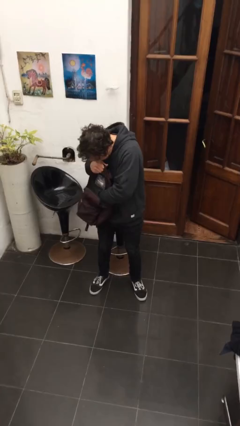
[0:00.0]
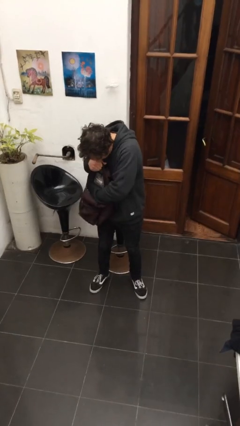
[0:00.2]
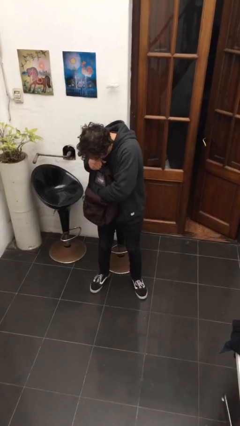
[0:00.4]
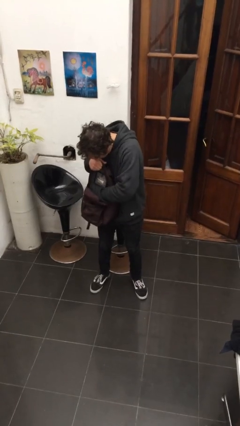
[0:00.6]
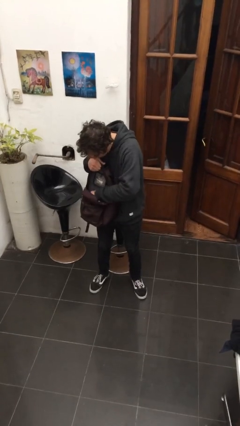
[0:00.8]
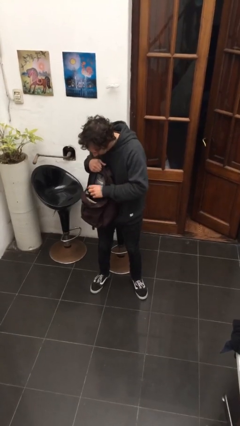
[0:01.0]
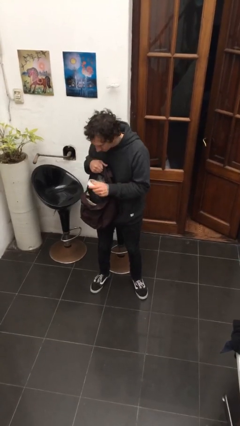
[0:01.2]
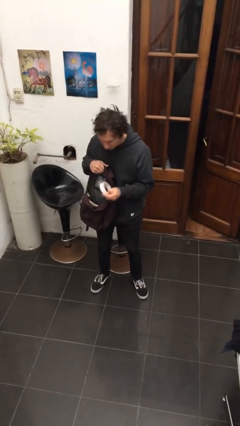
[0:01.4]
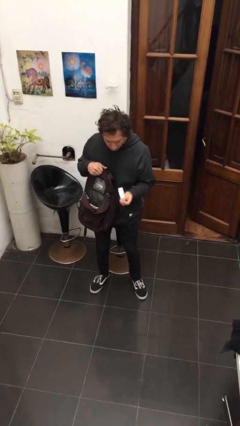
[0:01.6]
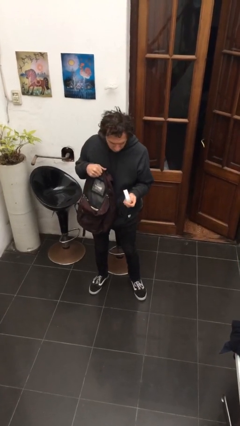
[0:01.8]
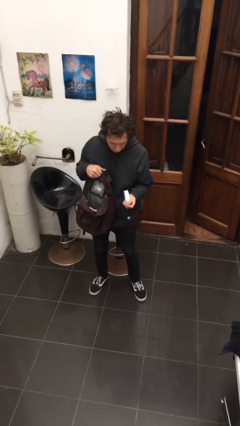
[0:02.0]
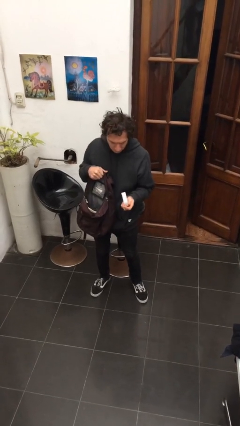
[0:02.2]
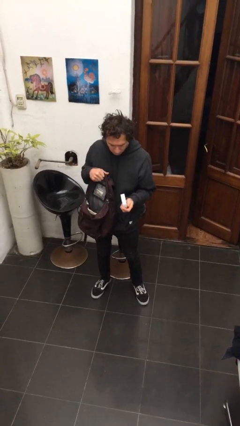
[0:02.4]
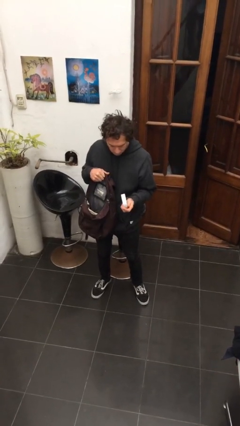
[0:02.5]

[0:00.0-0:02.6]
person takes object from backpack

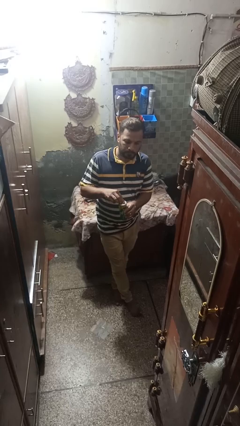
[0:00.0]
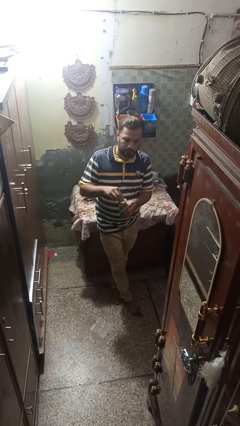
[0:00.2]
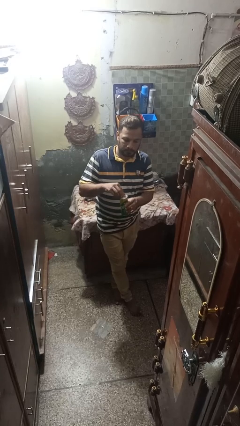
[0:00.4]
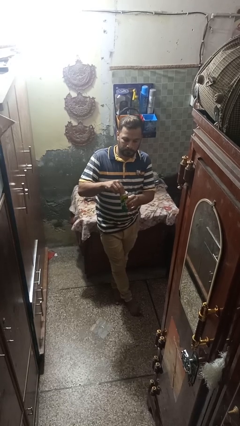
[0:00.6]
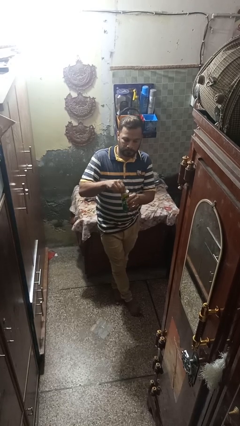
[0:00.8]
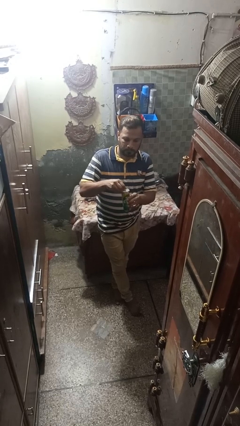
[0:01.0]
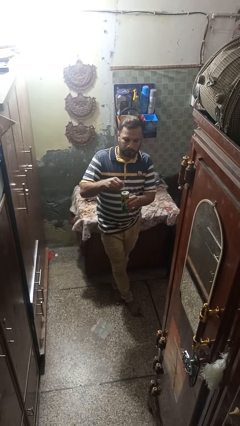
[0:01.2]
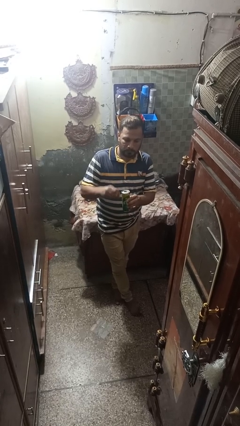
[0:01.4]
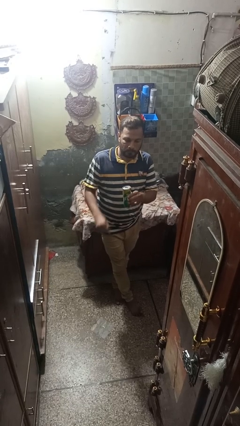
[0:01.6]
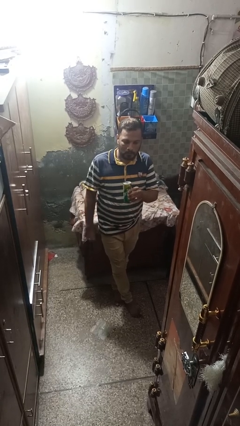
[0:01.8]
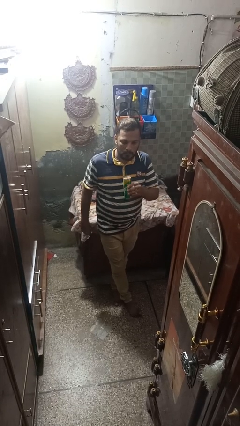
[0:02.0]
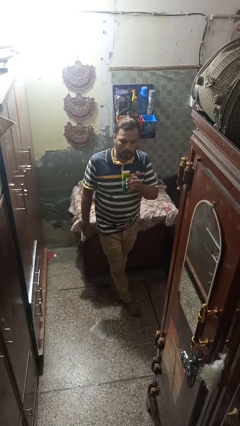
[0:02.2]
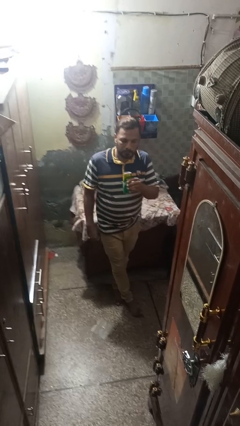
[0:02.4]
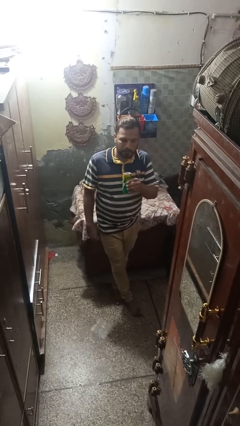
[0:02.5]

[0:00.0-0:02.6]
person opens beverage can

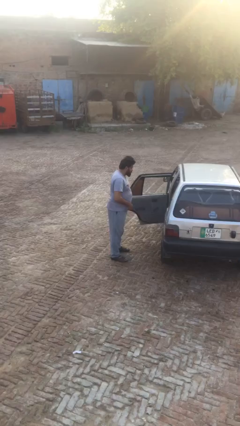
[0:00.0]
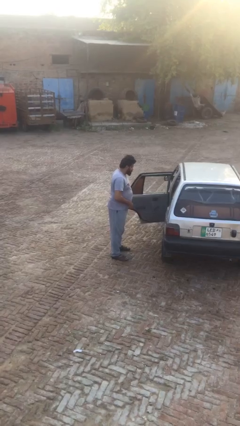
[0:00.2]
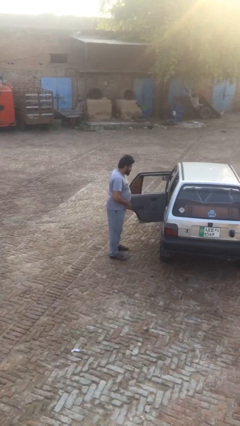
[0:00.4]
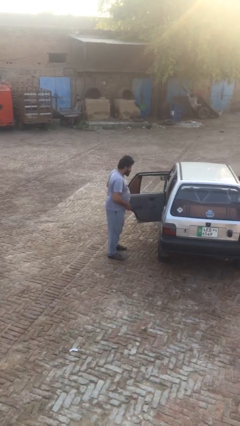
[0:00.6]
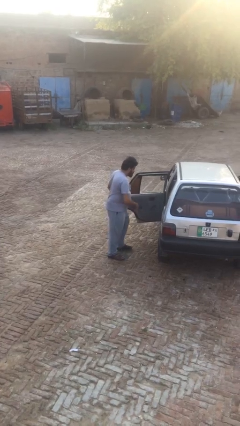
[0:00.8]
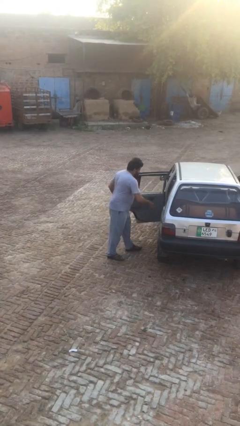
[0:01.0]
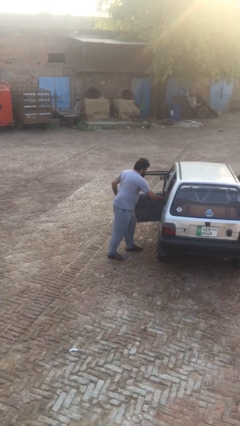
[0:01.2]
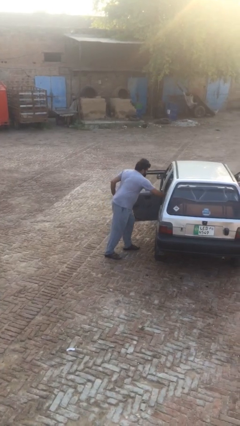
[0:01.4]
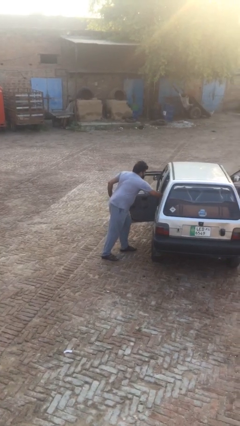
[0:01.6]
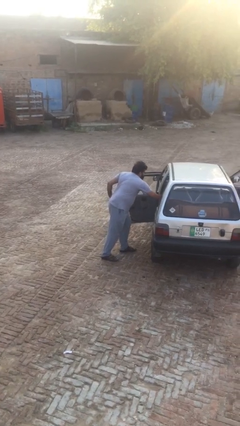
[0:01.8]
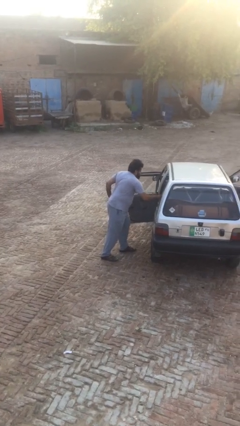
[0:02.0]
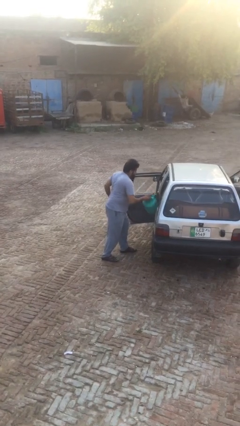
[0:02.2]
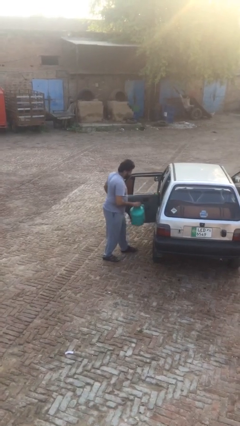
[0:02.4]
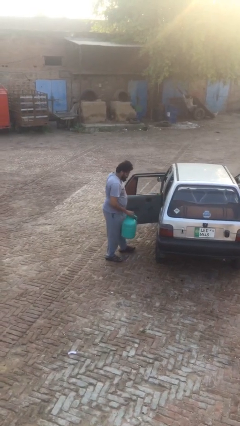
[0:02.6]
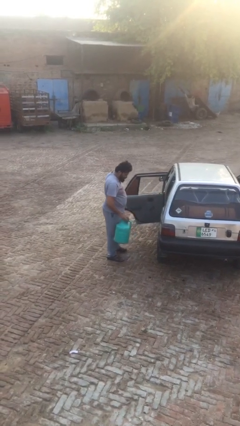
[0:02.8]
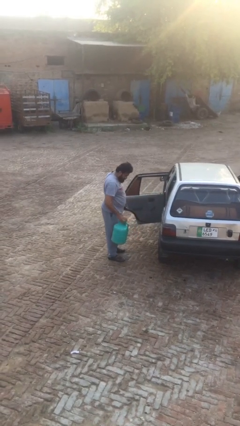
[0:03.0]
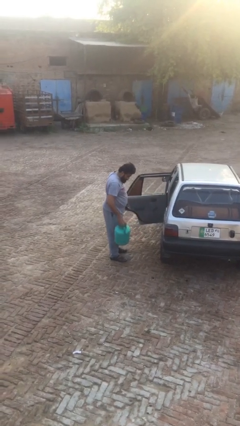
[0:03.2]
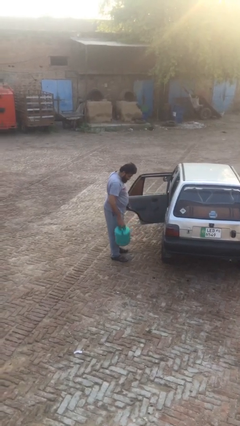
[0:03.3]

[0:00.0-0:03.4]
person unloads car

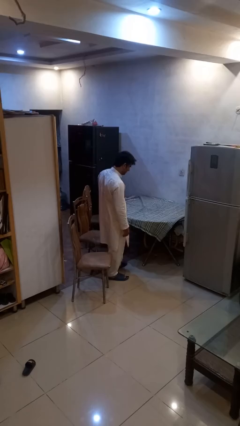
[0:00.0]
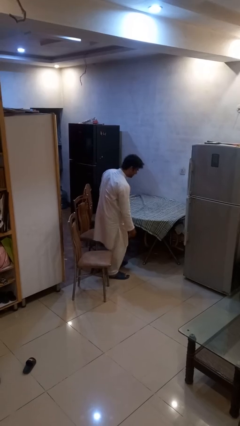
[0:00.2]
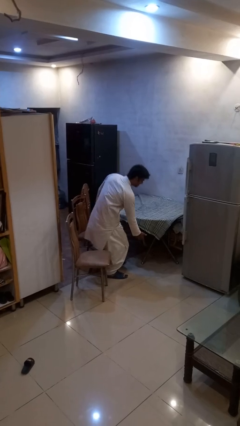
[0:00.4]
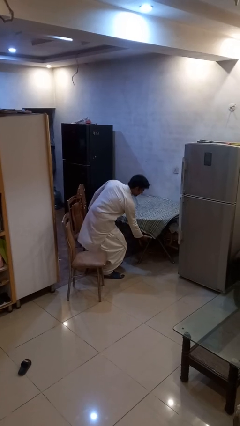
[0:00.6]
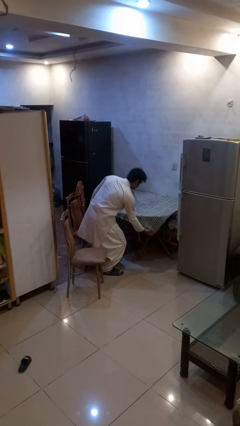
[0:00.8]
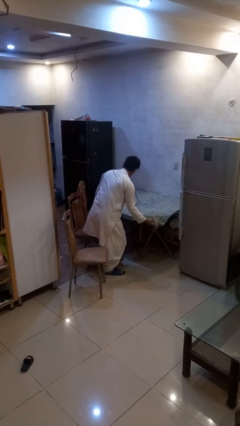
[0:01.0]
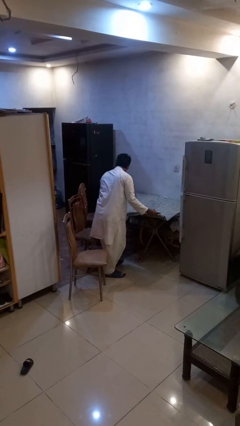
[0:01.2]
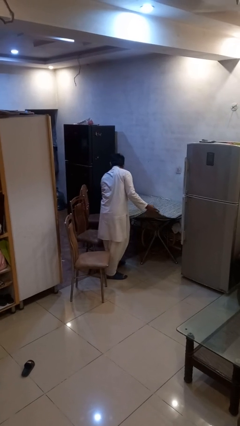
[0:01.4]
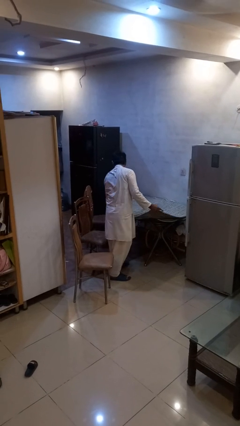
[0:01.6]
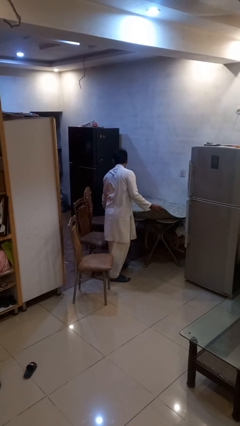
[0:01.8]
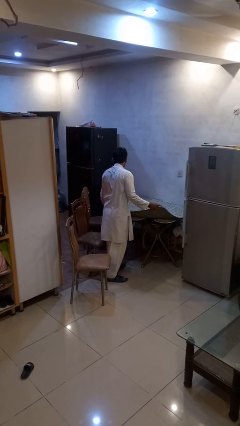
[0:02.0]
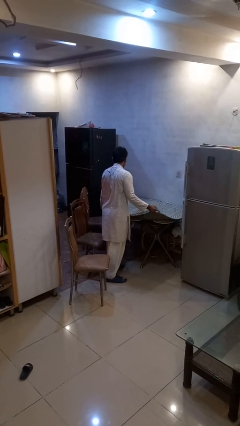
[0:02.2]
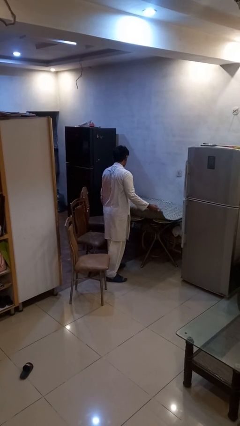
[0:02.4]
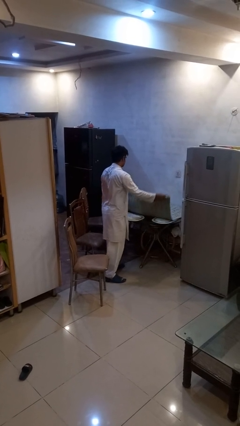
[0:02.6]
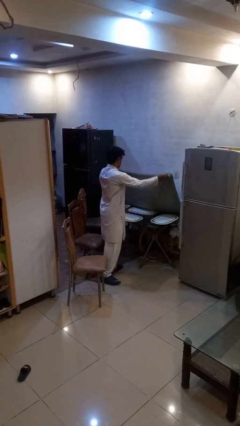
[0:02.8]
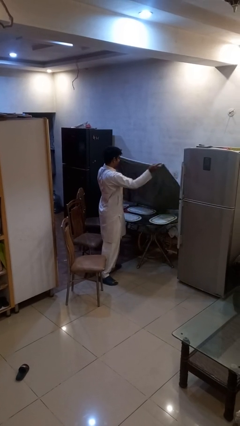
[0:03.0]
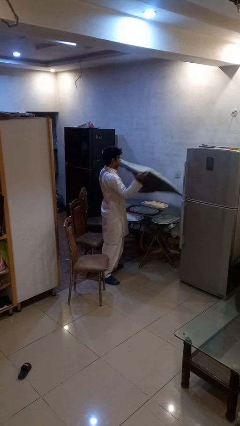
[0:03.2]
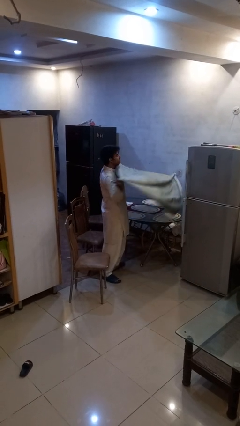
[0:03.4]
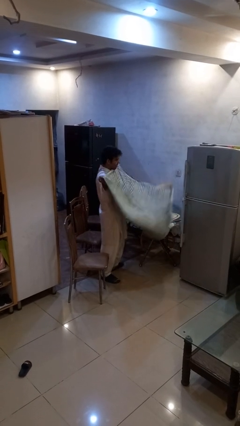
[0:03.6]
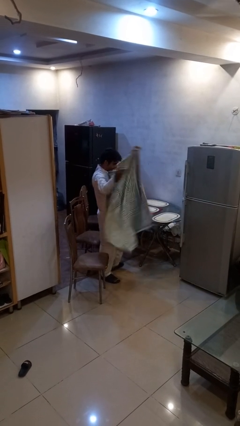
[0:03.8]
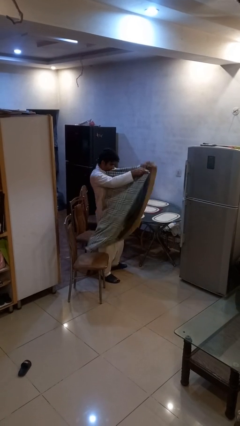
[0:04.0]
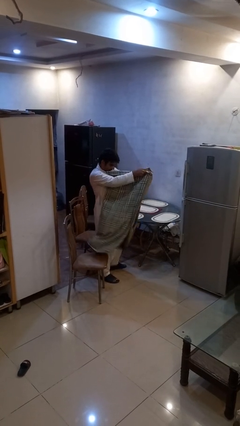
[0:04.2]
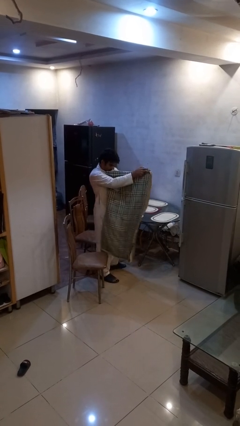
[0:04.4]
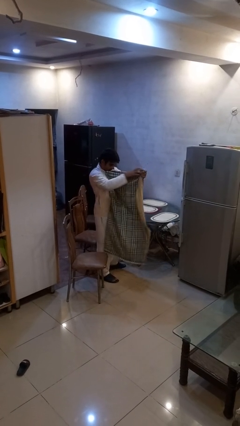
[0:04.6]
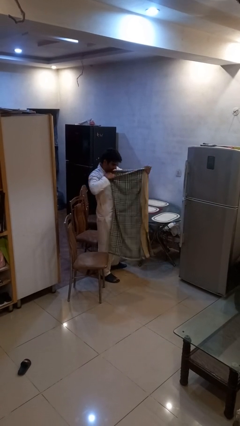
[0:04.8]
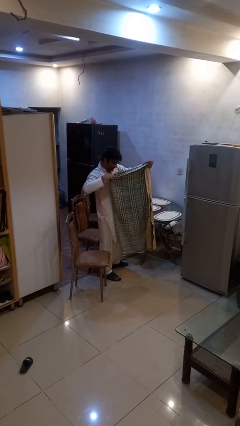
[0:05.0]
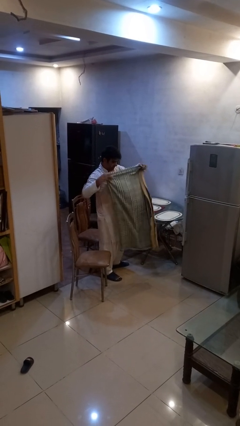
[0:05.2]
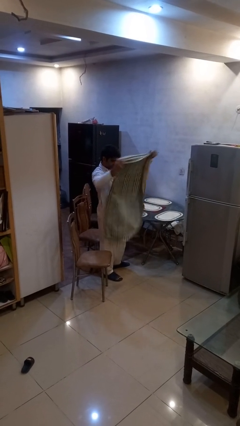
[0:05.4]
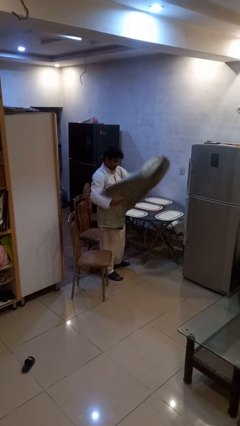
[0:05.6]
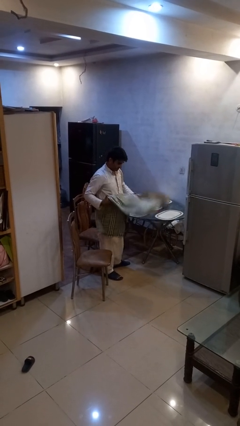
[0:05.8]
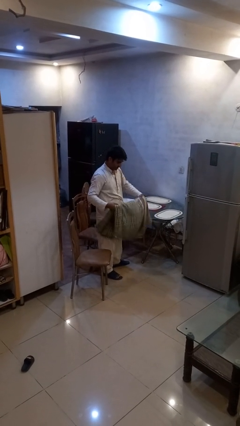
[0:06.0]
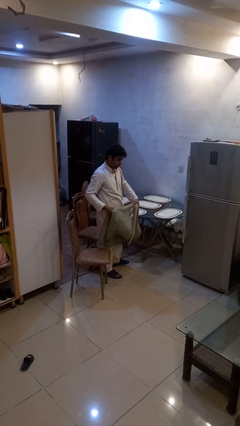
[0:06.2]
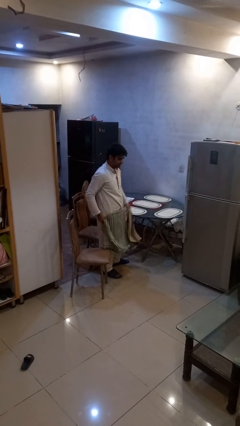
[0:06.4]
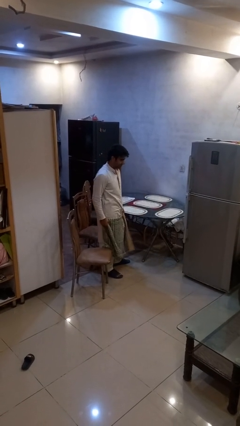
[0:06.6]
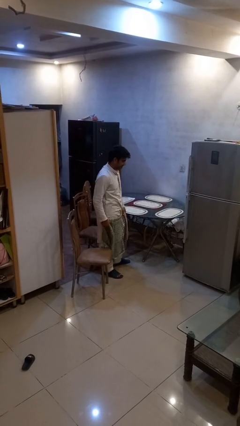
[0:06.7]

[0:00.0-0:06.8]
person folds tablecloth

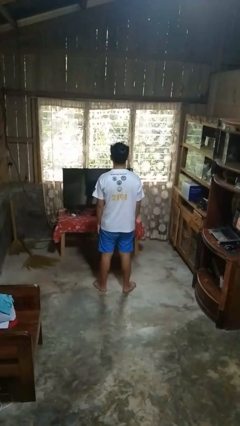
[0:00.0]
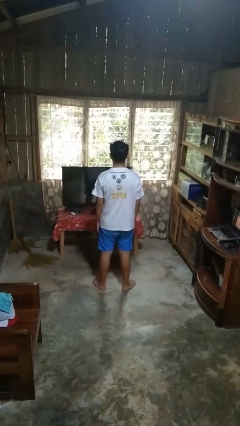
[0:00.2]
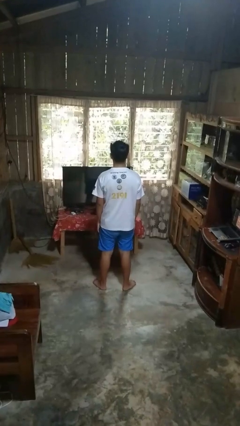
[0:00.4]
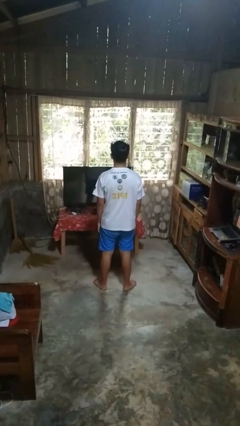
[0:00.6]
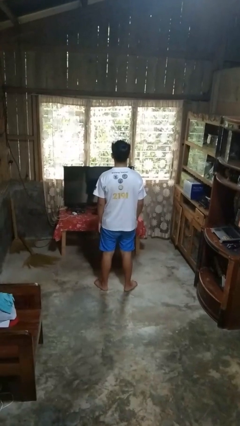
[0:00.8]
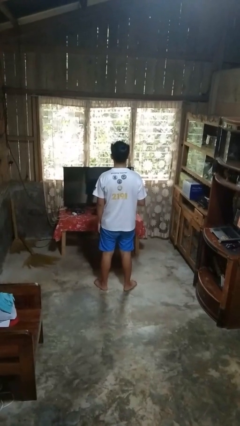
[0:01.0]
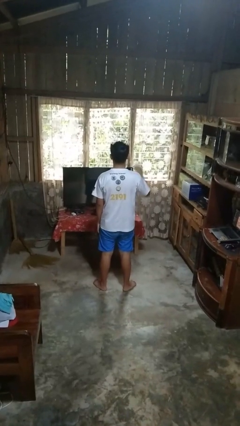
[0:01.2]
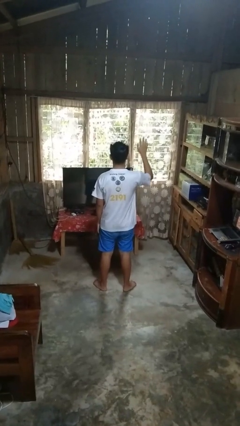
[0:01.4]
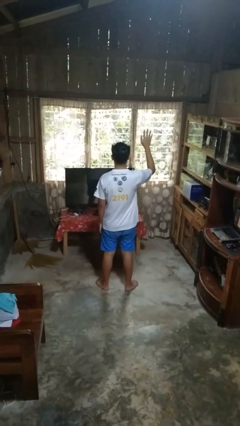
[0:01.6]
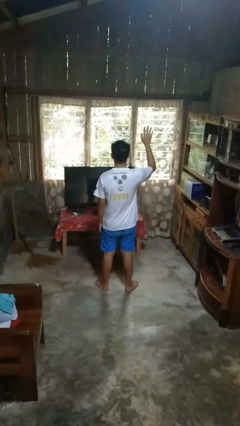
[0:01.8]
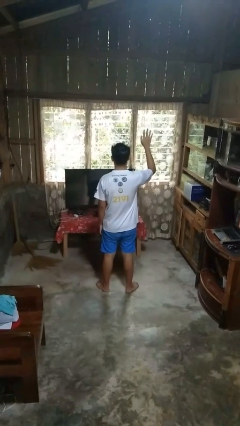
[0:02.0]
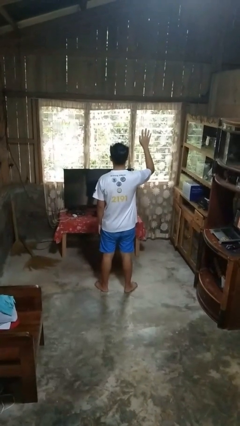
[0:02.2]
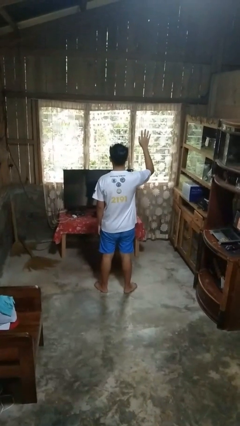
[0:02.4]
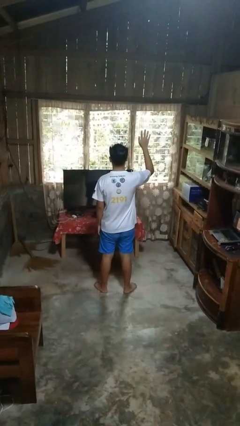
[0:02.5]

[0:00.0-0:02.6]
person gestures raise hand
